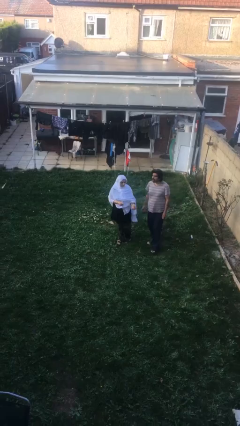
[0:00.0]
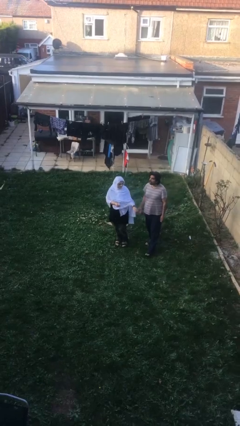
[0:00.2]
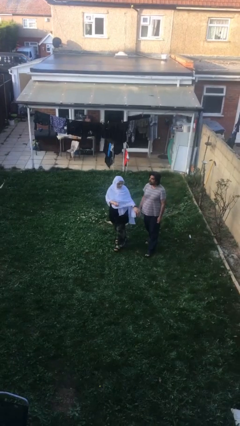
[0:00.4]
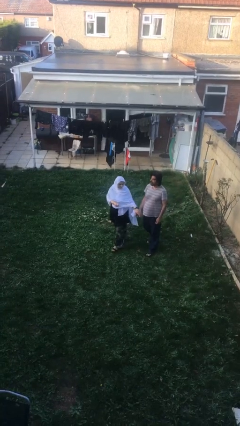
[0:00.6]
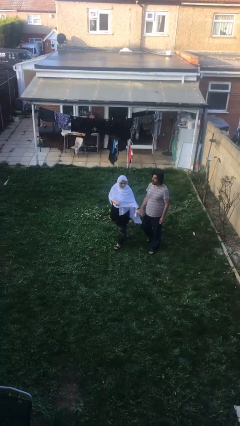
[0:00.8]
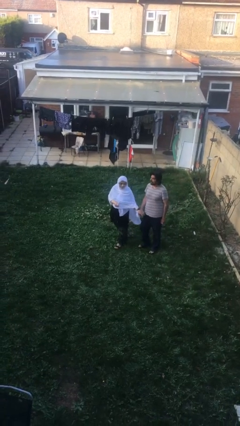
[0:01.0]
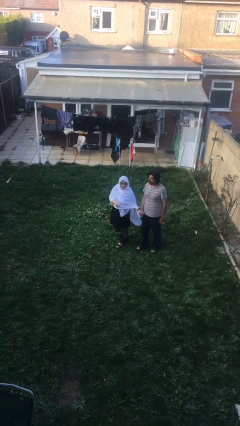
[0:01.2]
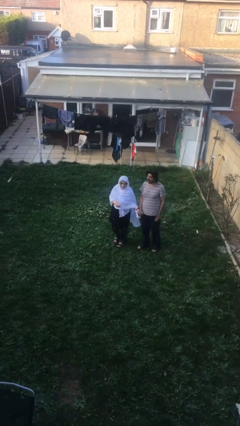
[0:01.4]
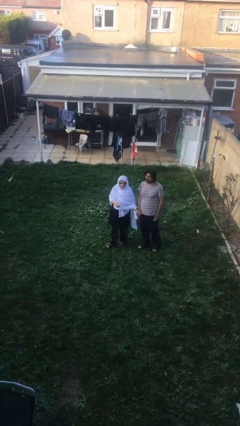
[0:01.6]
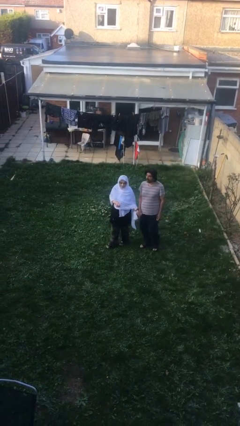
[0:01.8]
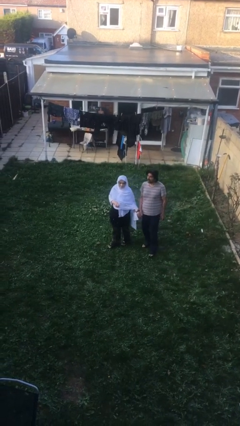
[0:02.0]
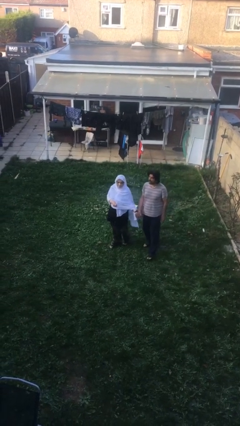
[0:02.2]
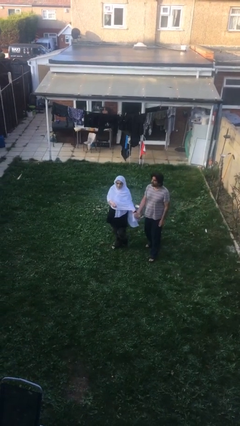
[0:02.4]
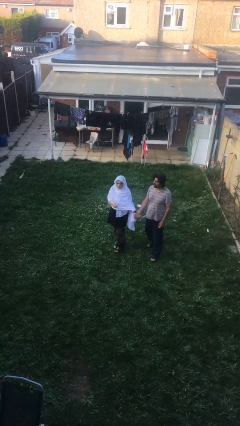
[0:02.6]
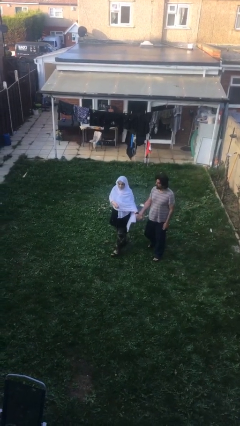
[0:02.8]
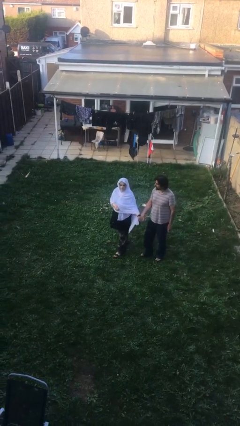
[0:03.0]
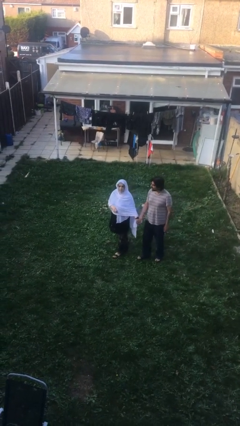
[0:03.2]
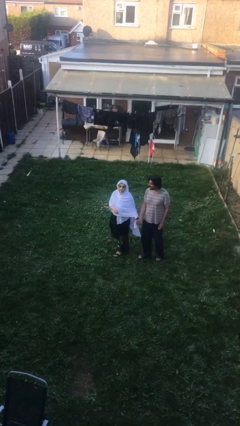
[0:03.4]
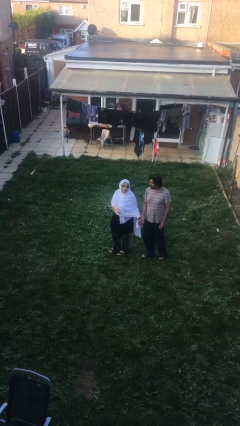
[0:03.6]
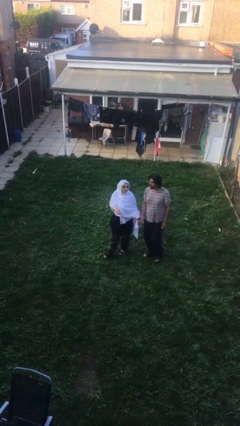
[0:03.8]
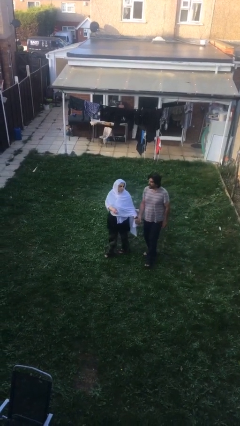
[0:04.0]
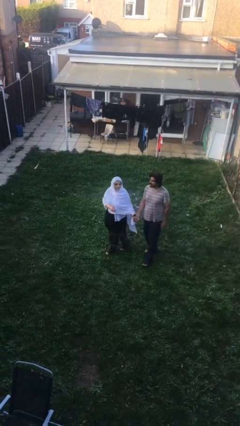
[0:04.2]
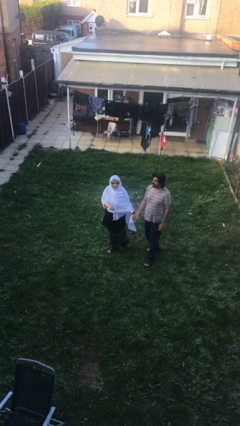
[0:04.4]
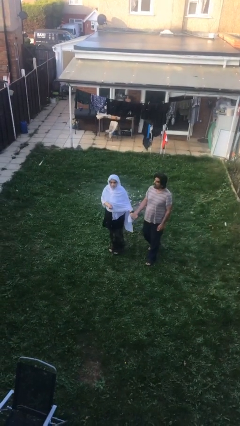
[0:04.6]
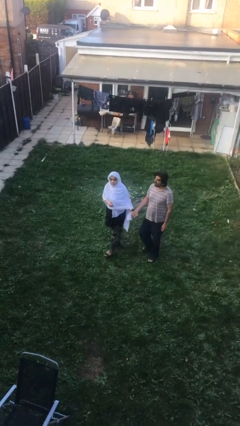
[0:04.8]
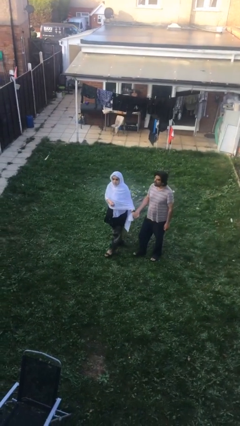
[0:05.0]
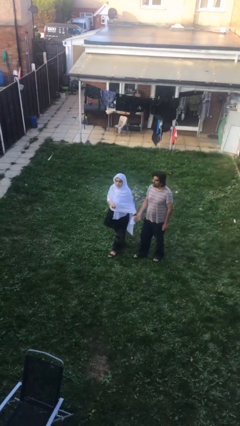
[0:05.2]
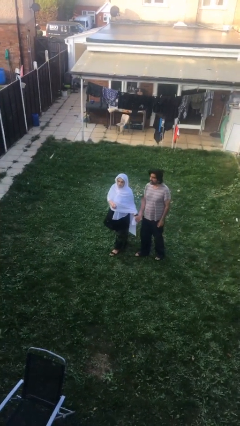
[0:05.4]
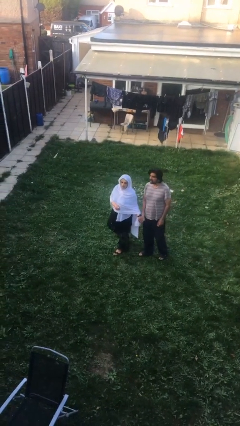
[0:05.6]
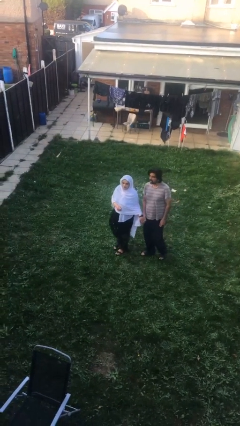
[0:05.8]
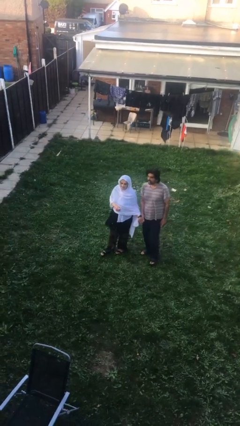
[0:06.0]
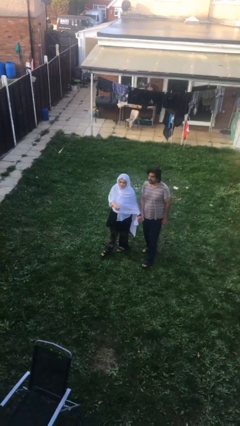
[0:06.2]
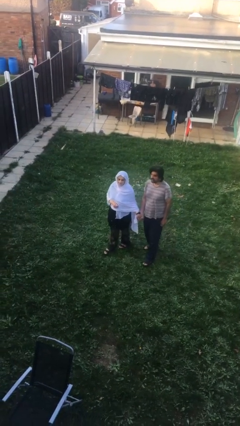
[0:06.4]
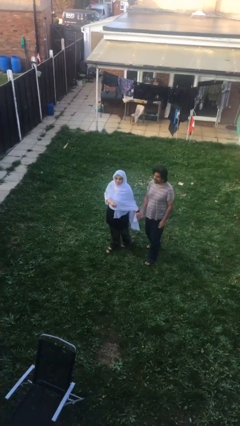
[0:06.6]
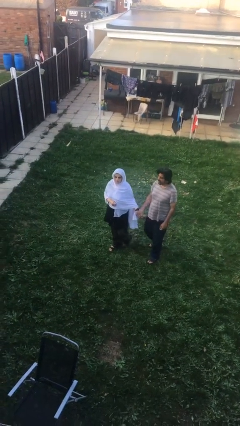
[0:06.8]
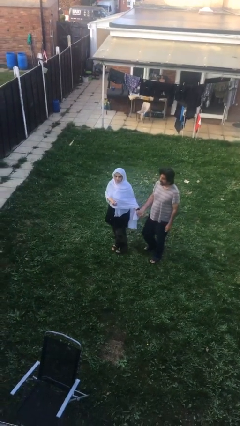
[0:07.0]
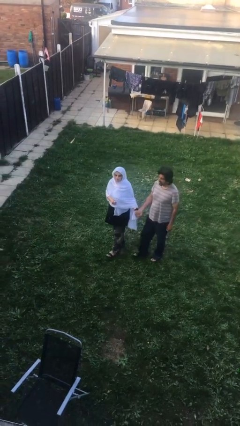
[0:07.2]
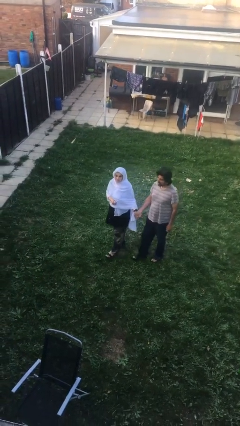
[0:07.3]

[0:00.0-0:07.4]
person holds hand

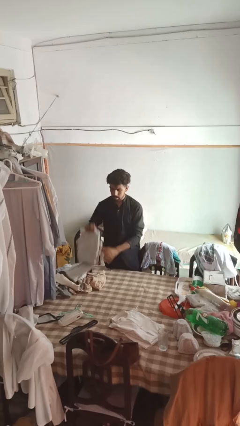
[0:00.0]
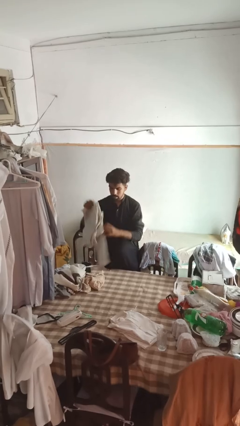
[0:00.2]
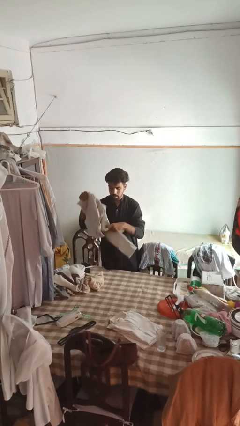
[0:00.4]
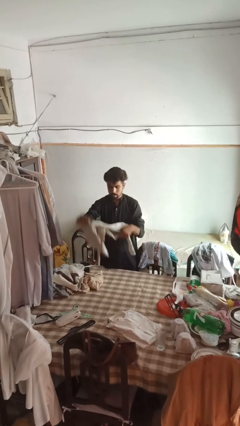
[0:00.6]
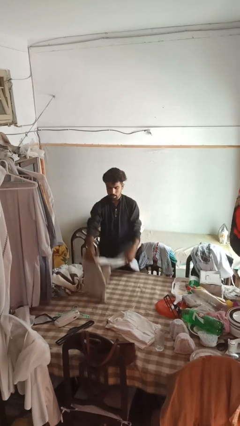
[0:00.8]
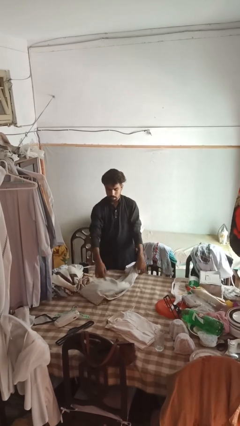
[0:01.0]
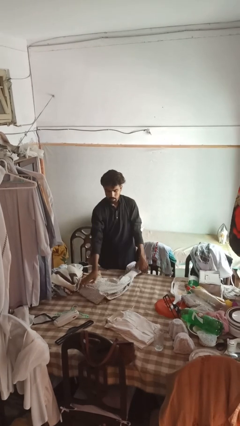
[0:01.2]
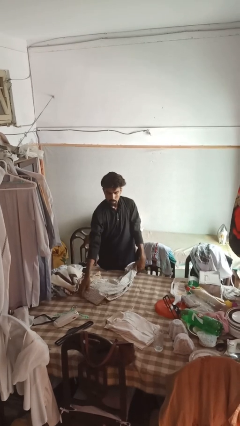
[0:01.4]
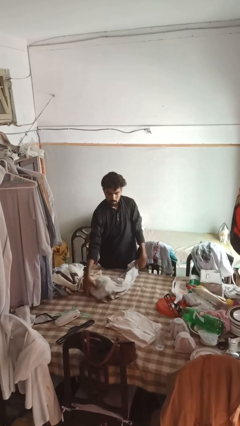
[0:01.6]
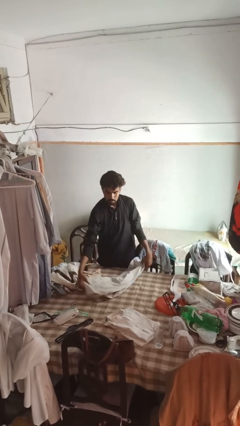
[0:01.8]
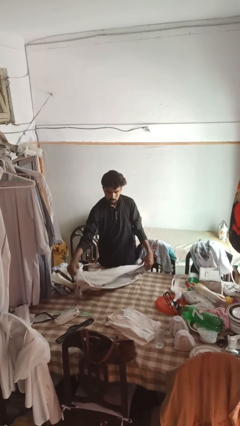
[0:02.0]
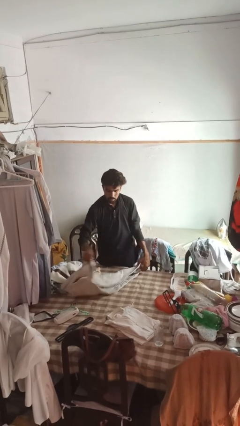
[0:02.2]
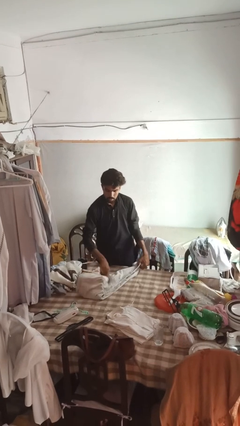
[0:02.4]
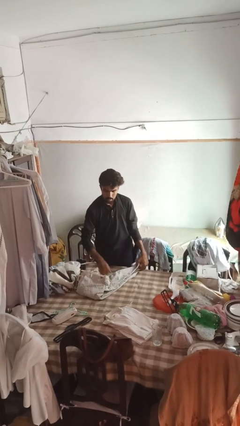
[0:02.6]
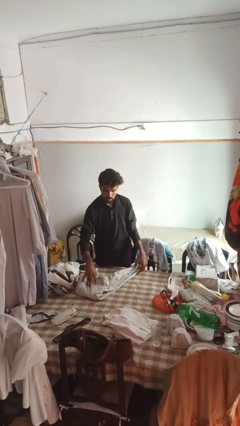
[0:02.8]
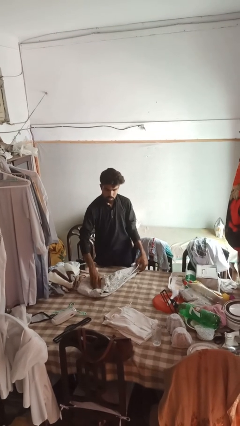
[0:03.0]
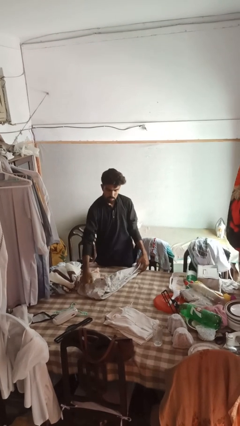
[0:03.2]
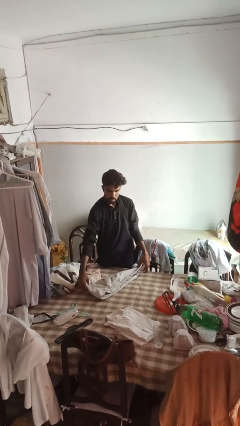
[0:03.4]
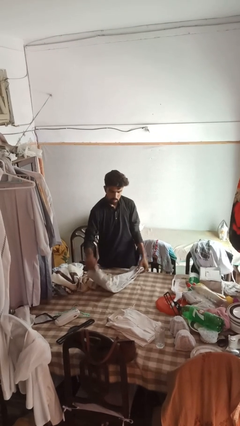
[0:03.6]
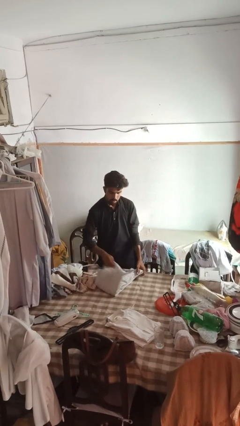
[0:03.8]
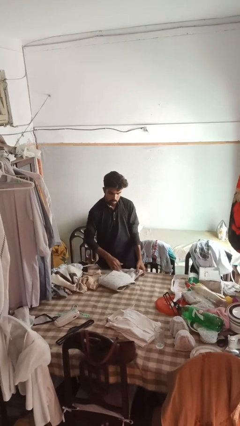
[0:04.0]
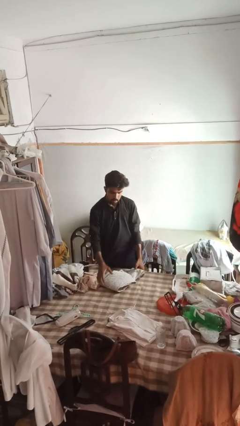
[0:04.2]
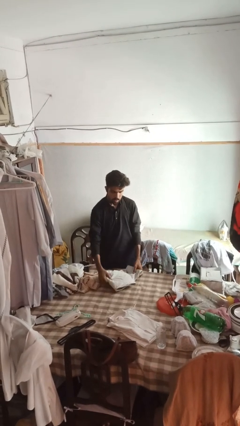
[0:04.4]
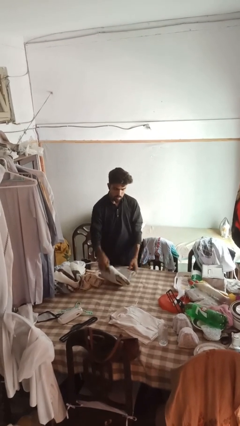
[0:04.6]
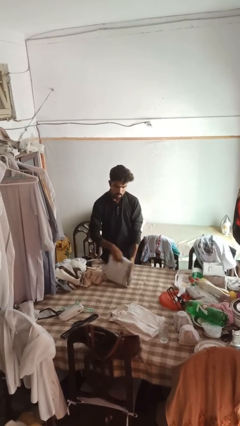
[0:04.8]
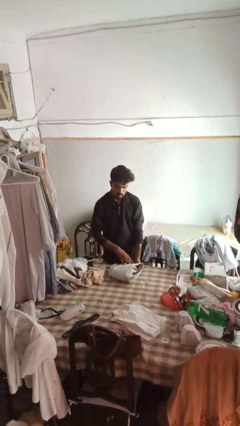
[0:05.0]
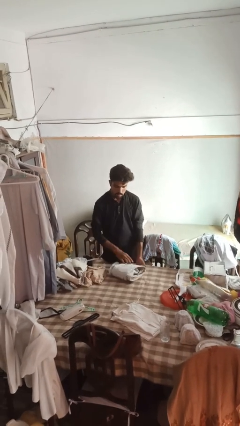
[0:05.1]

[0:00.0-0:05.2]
person folds socks

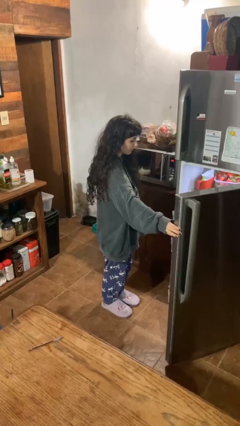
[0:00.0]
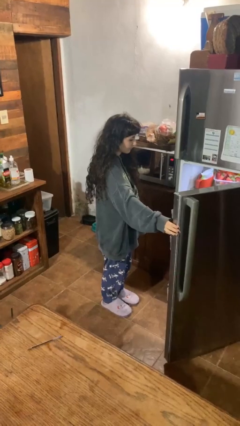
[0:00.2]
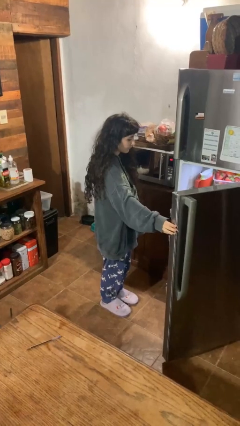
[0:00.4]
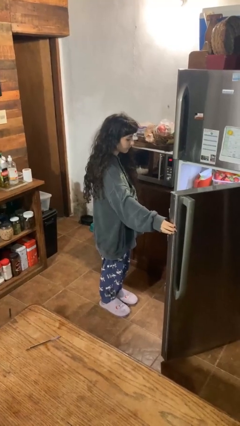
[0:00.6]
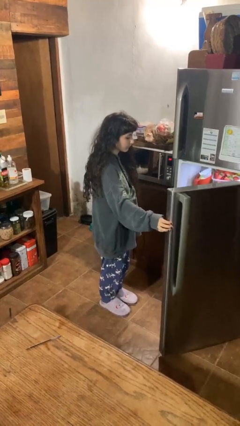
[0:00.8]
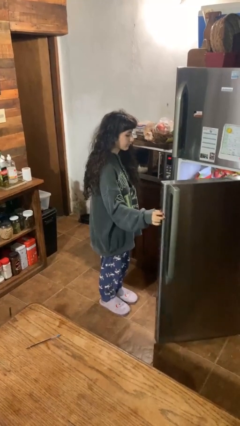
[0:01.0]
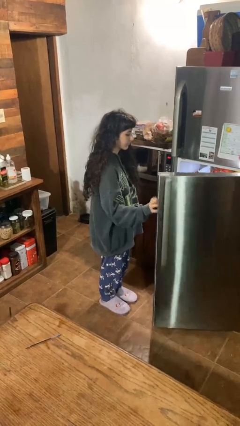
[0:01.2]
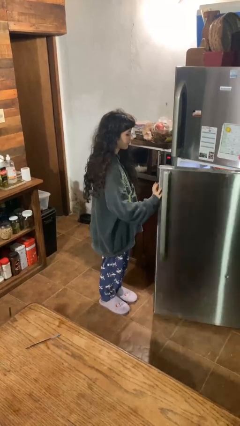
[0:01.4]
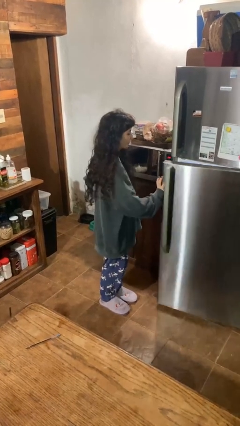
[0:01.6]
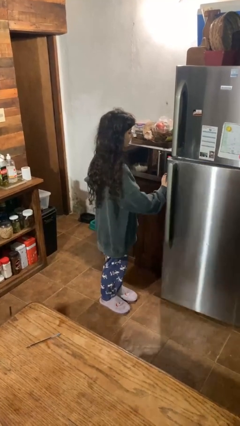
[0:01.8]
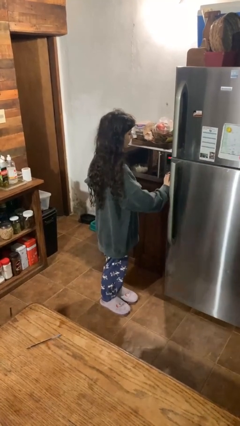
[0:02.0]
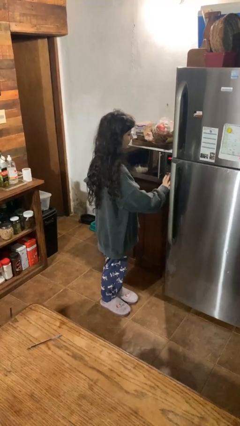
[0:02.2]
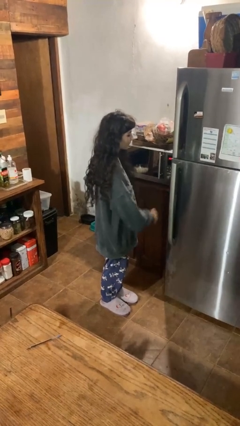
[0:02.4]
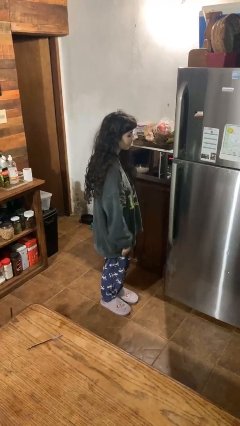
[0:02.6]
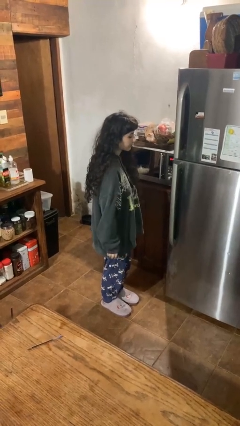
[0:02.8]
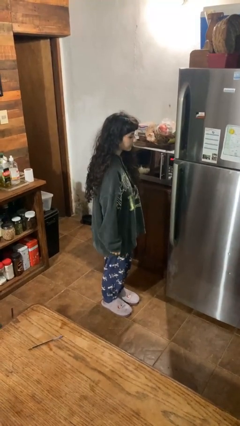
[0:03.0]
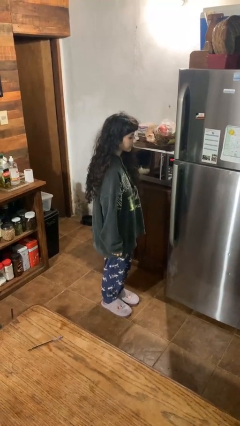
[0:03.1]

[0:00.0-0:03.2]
person closes refrigerator

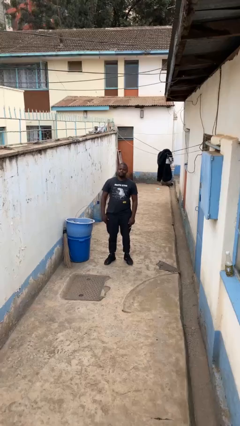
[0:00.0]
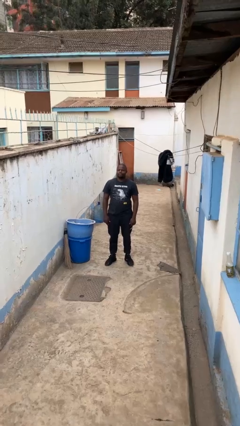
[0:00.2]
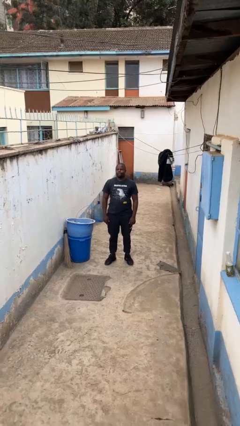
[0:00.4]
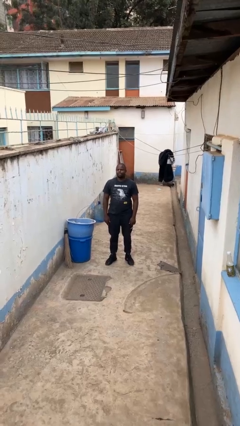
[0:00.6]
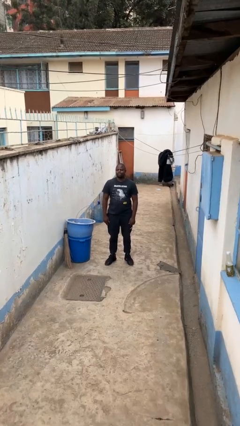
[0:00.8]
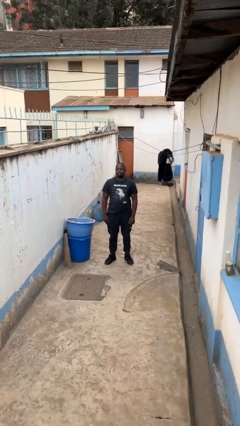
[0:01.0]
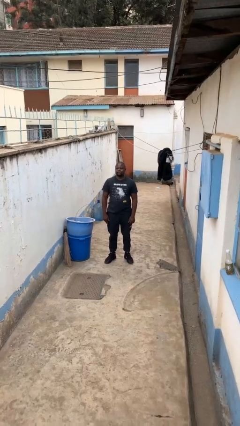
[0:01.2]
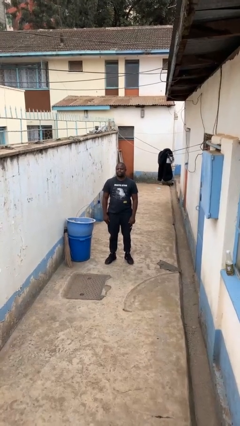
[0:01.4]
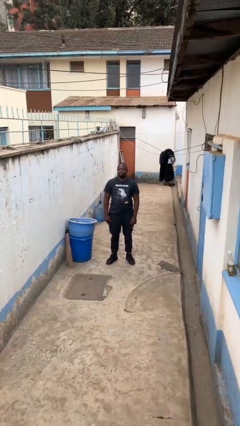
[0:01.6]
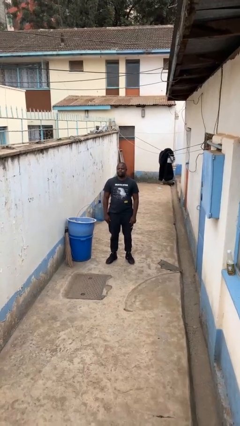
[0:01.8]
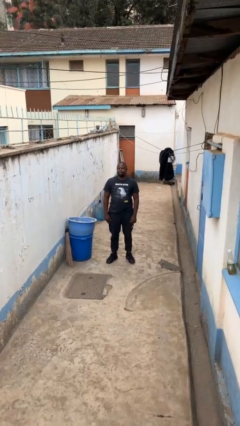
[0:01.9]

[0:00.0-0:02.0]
person gestures lower hand
